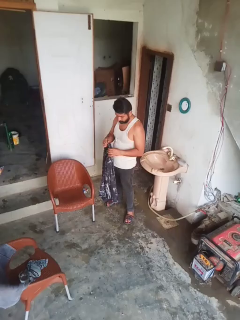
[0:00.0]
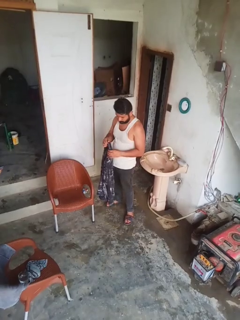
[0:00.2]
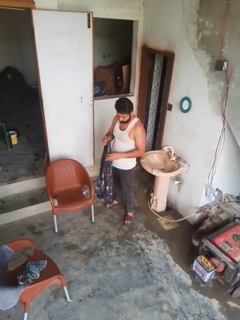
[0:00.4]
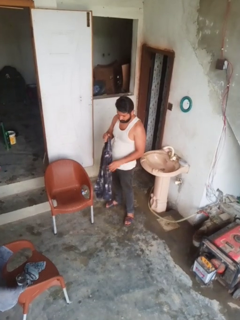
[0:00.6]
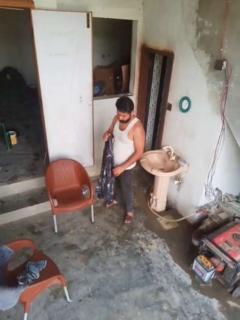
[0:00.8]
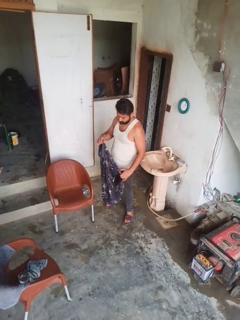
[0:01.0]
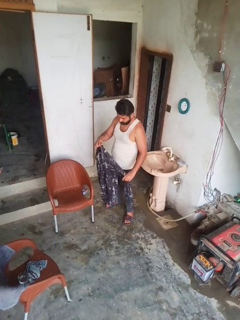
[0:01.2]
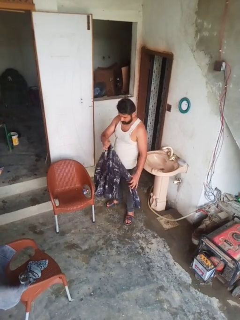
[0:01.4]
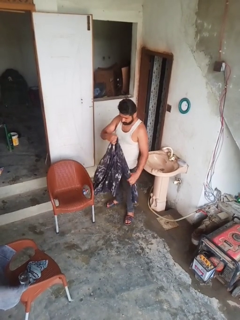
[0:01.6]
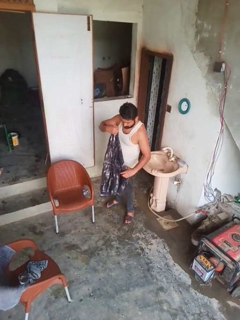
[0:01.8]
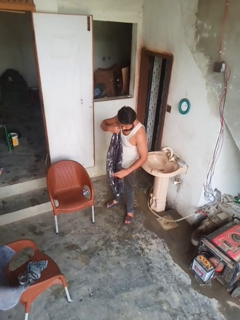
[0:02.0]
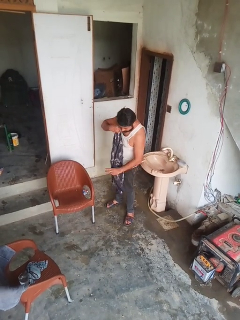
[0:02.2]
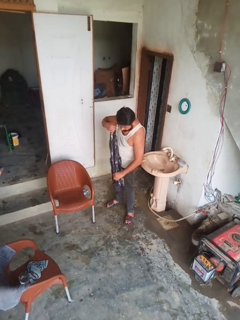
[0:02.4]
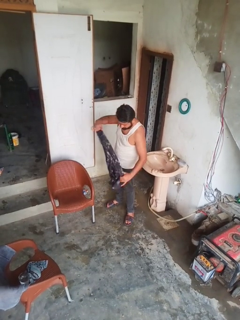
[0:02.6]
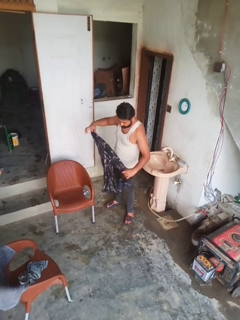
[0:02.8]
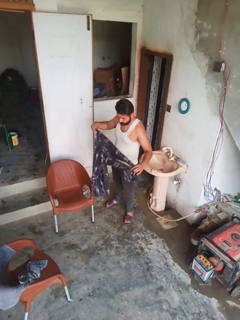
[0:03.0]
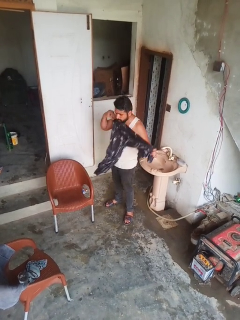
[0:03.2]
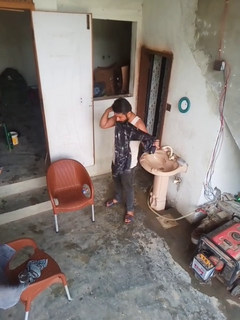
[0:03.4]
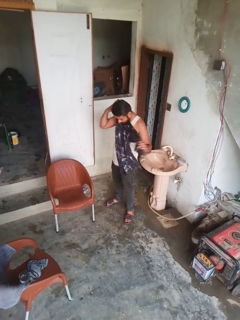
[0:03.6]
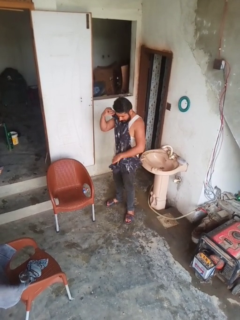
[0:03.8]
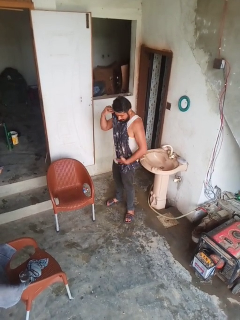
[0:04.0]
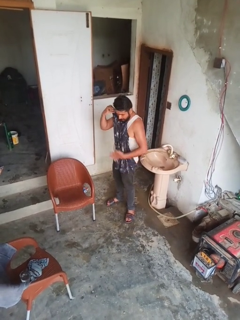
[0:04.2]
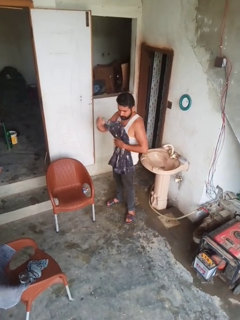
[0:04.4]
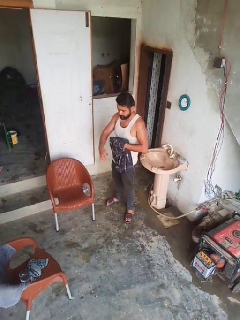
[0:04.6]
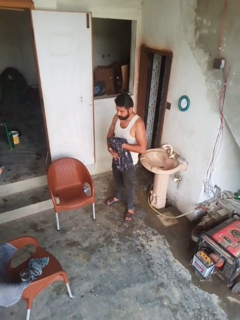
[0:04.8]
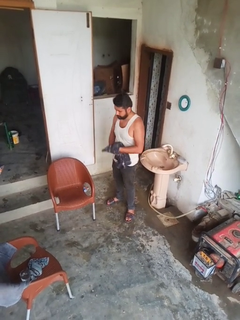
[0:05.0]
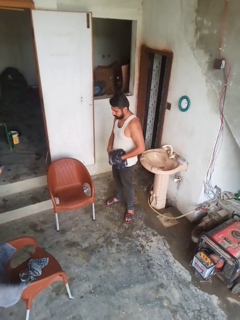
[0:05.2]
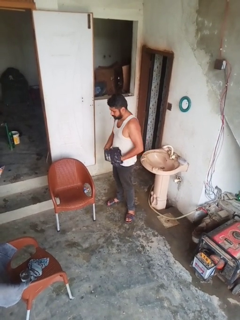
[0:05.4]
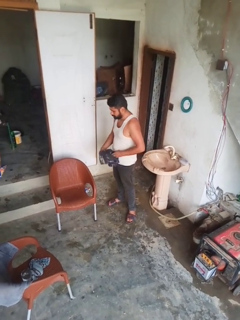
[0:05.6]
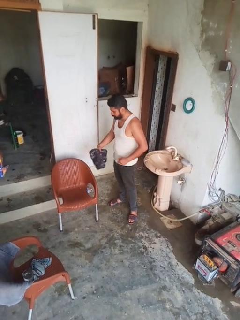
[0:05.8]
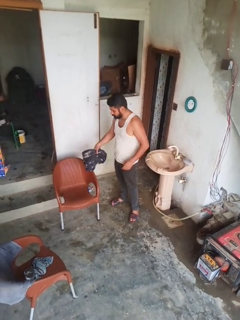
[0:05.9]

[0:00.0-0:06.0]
person folds shirt

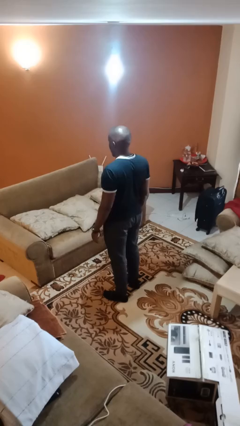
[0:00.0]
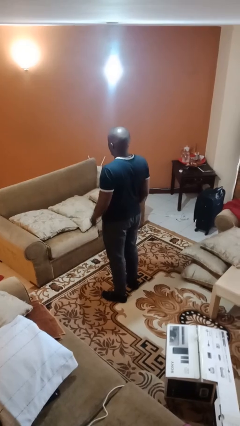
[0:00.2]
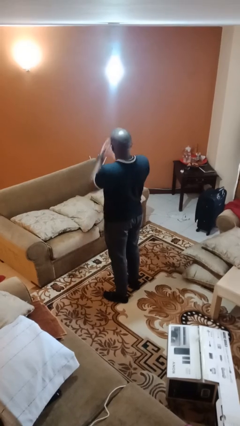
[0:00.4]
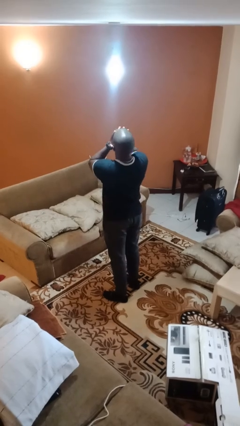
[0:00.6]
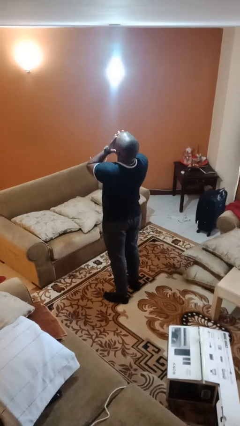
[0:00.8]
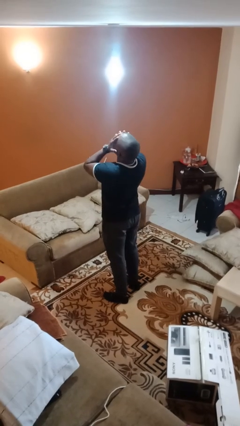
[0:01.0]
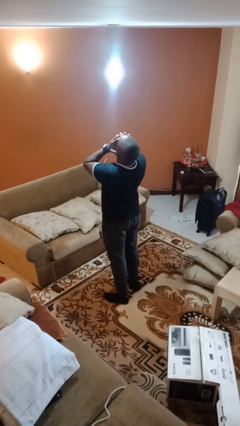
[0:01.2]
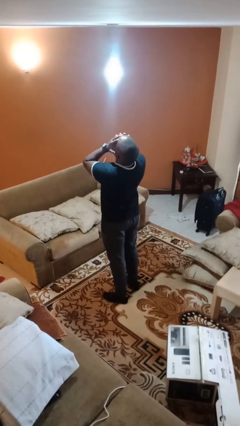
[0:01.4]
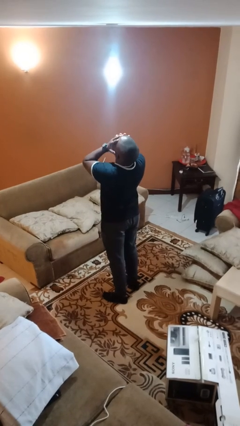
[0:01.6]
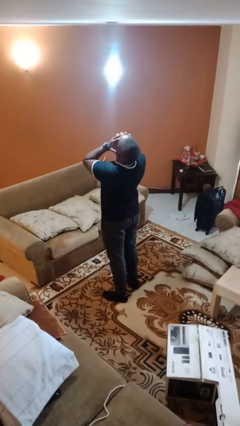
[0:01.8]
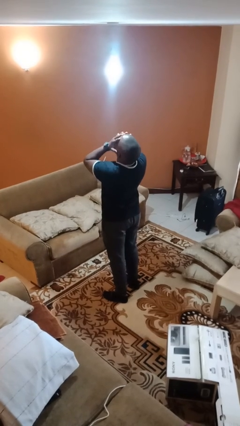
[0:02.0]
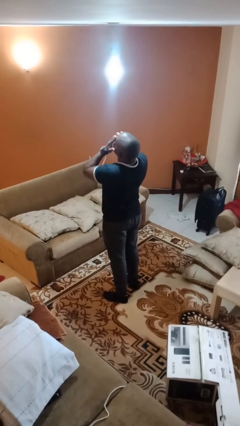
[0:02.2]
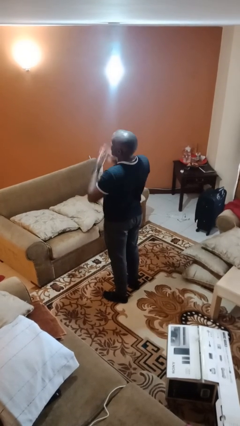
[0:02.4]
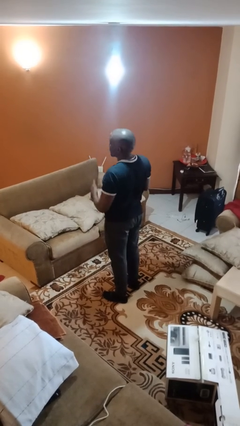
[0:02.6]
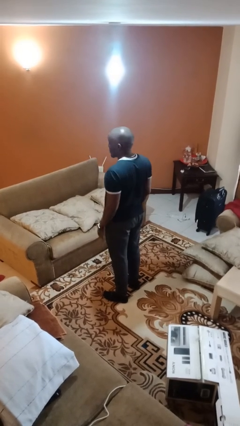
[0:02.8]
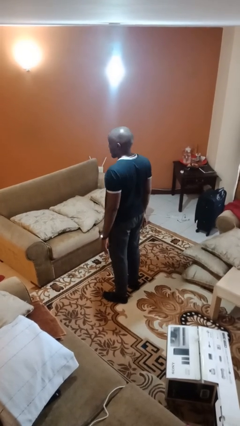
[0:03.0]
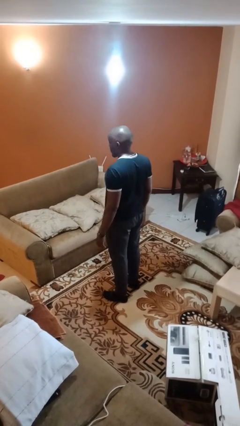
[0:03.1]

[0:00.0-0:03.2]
person covers face with hands

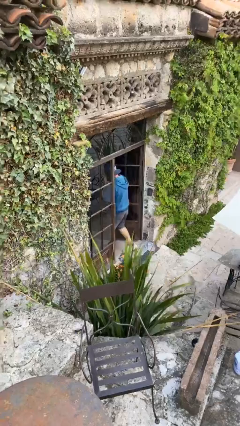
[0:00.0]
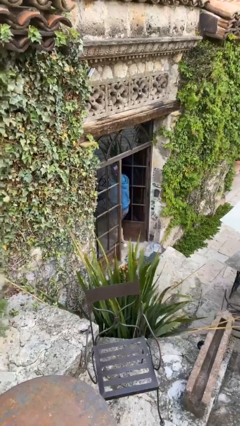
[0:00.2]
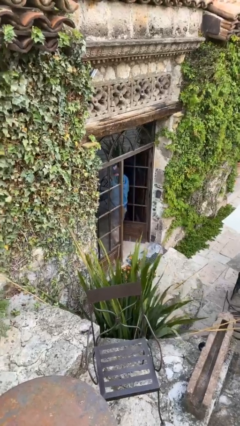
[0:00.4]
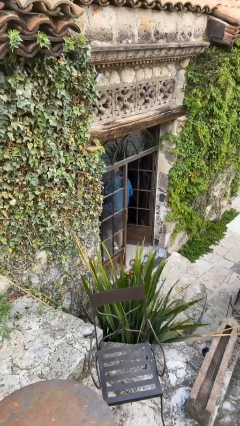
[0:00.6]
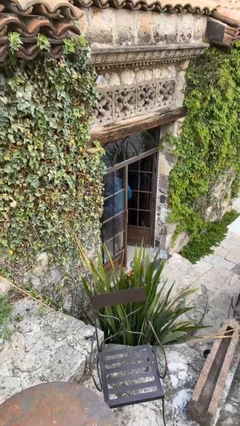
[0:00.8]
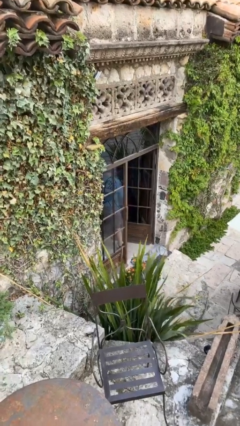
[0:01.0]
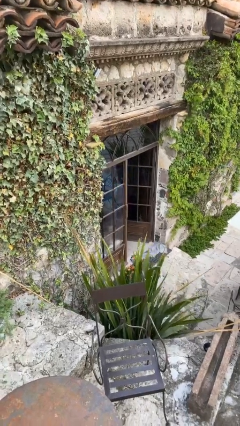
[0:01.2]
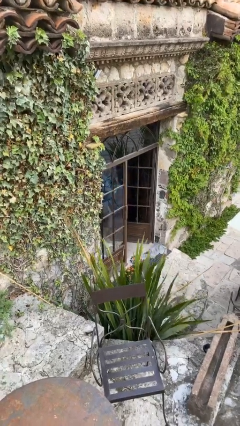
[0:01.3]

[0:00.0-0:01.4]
person exits scene through structure

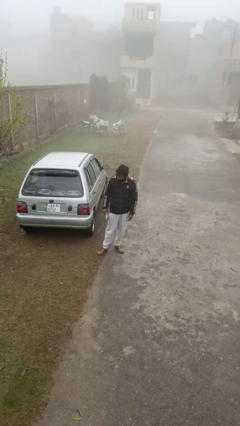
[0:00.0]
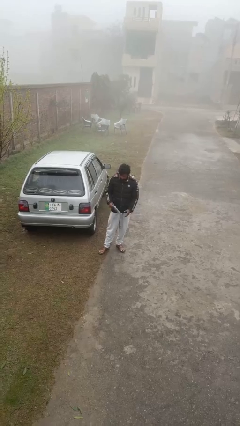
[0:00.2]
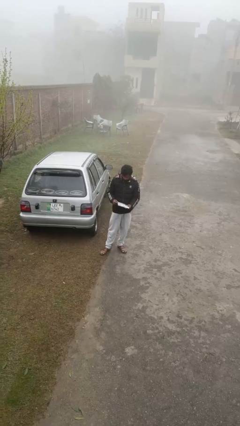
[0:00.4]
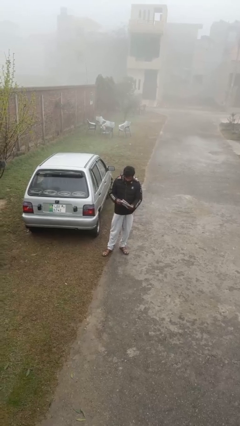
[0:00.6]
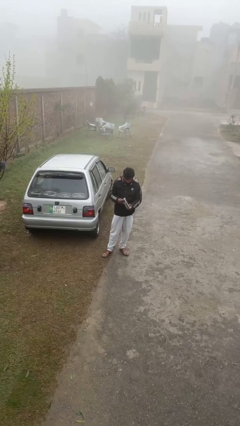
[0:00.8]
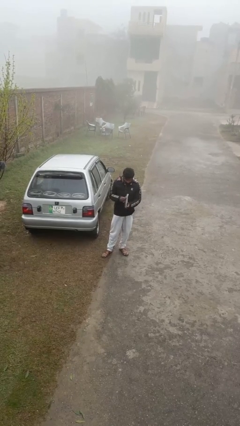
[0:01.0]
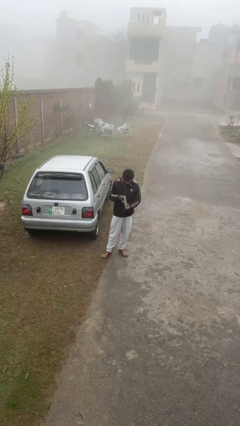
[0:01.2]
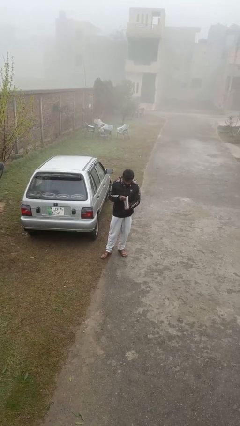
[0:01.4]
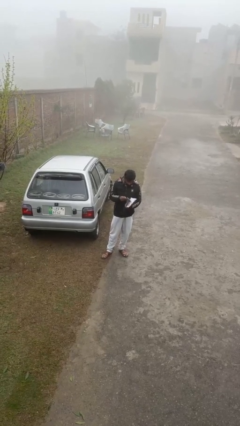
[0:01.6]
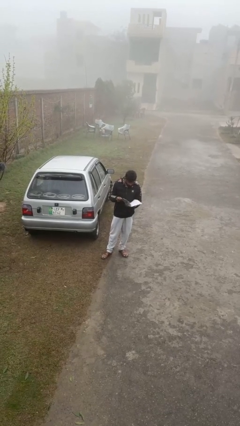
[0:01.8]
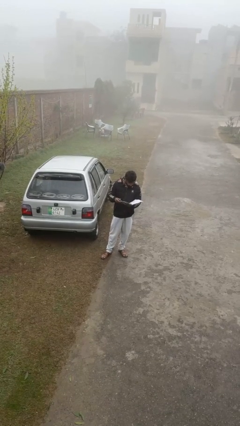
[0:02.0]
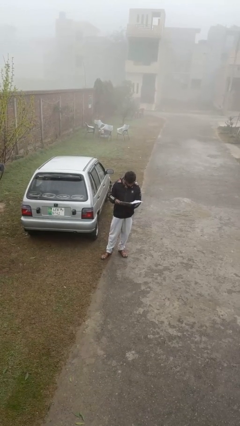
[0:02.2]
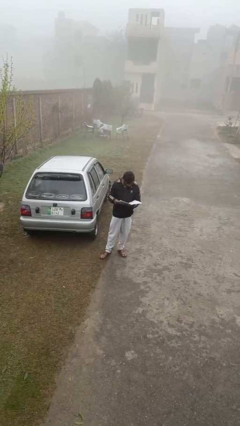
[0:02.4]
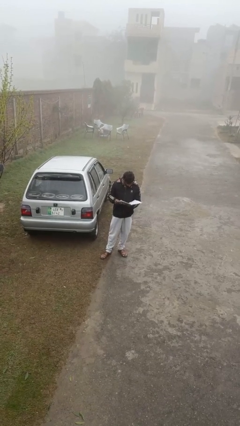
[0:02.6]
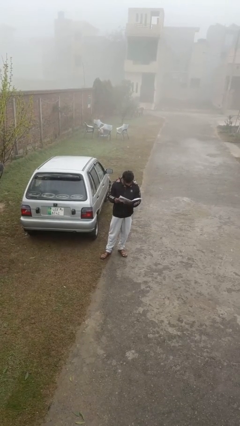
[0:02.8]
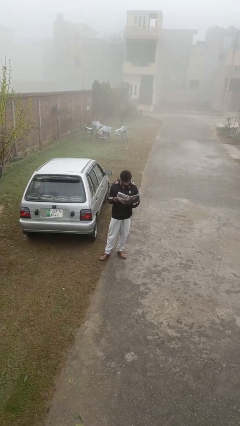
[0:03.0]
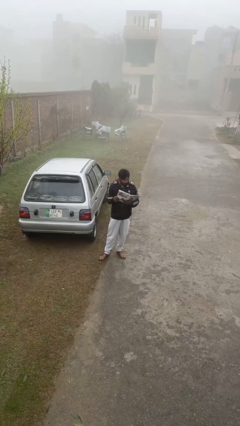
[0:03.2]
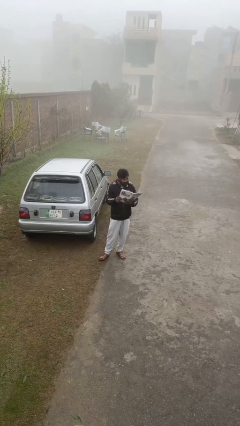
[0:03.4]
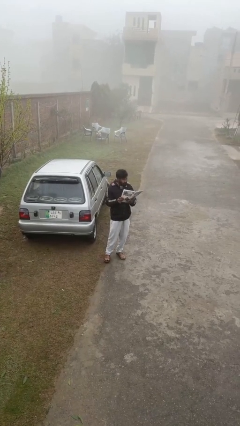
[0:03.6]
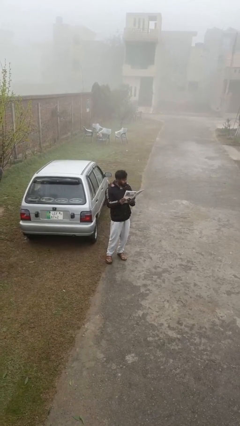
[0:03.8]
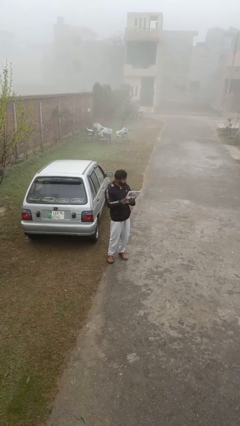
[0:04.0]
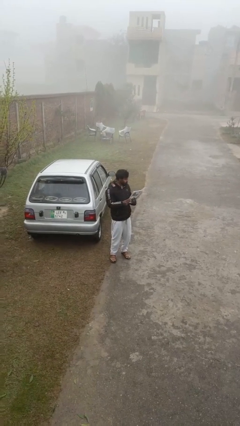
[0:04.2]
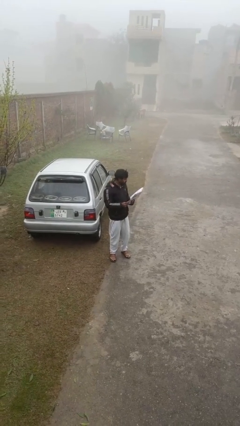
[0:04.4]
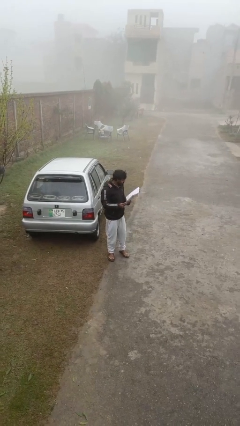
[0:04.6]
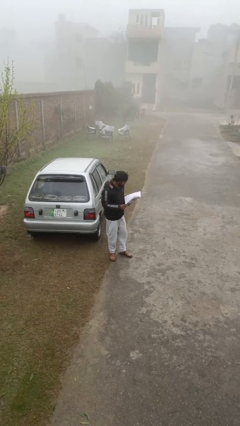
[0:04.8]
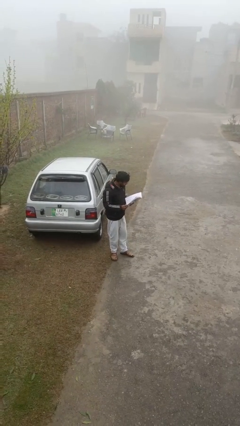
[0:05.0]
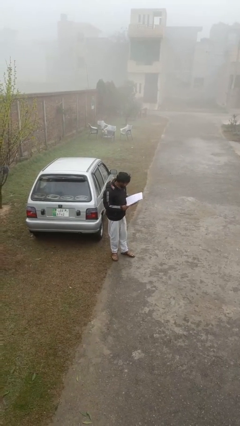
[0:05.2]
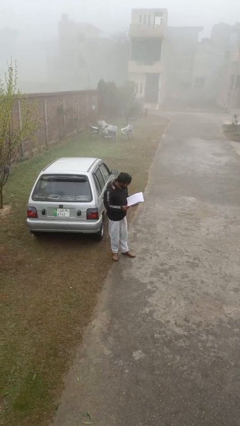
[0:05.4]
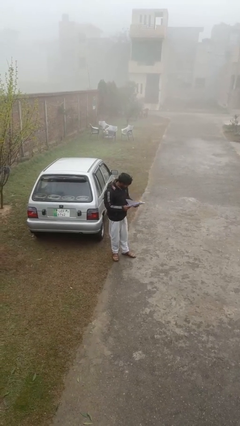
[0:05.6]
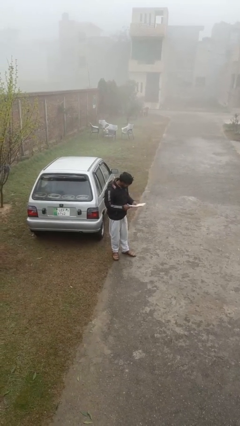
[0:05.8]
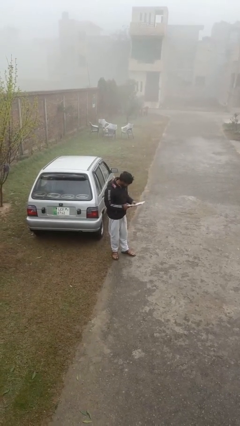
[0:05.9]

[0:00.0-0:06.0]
person reads document

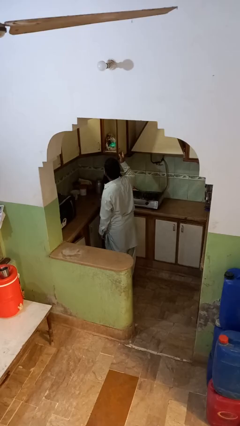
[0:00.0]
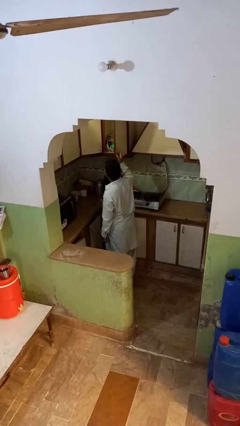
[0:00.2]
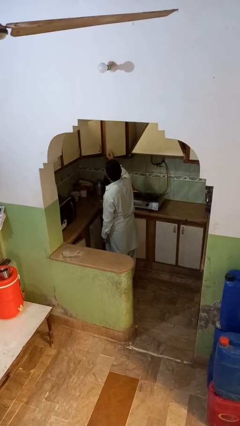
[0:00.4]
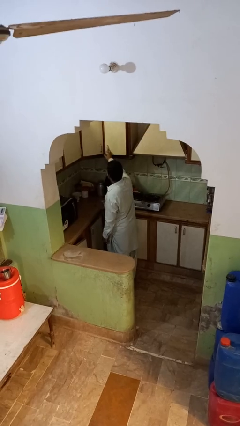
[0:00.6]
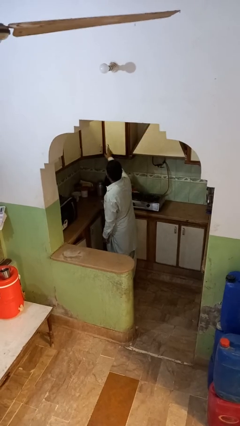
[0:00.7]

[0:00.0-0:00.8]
person closes cabinet

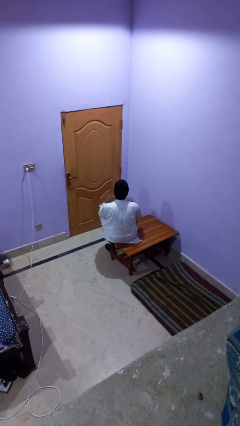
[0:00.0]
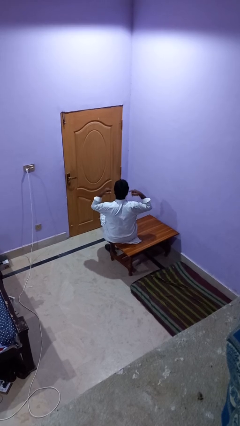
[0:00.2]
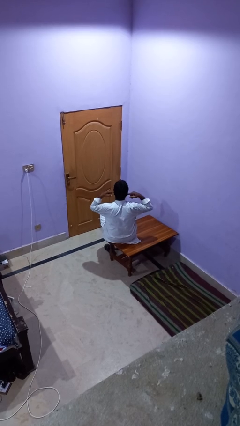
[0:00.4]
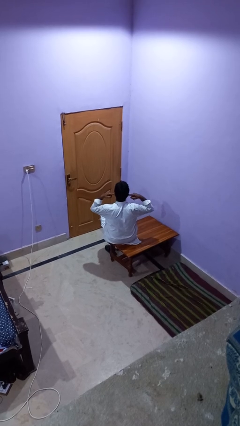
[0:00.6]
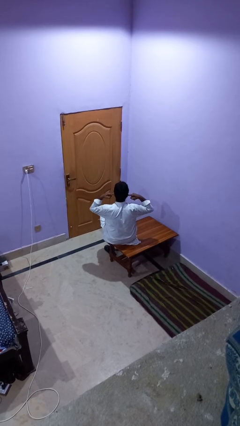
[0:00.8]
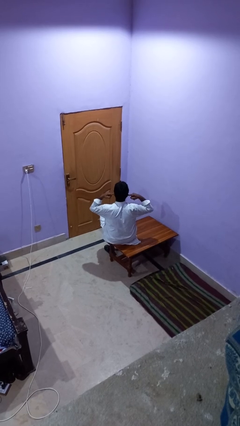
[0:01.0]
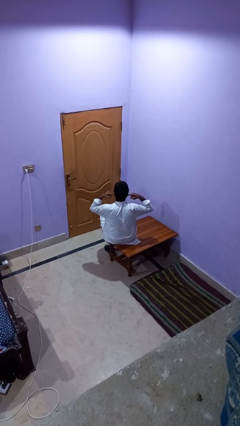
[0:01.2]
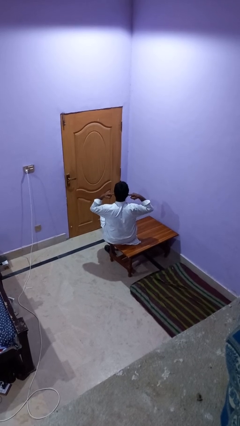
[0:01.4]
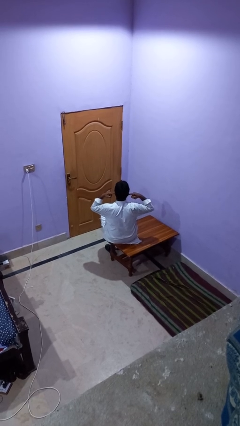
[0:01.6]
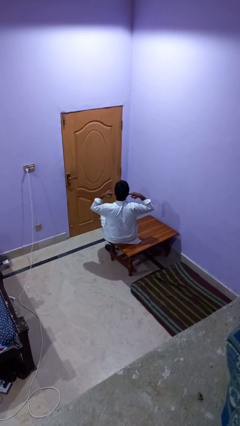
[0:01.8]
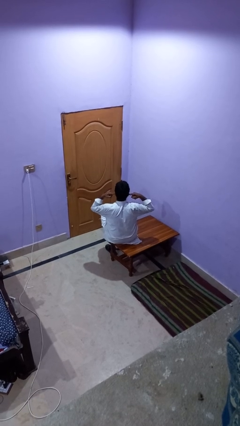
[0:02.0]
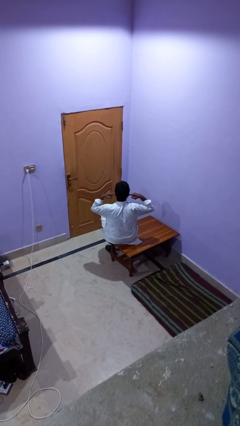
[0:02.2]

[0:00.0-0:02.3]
person puts fingers in ear
